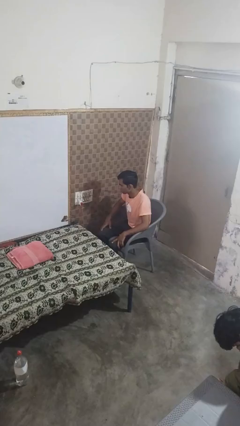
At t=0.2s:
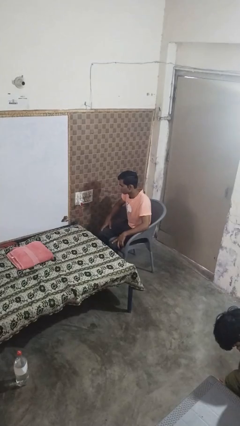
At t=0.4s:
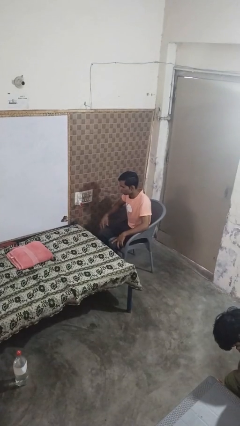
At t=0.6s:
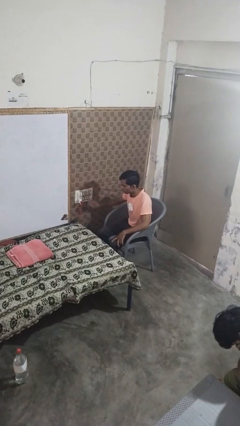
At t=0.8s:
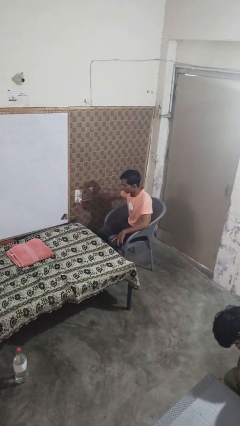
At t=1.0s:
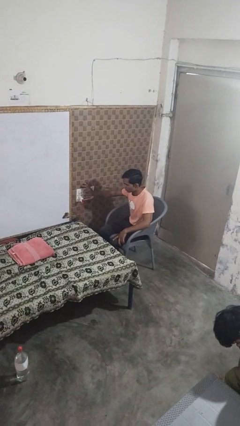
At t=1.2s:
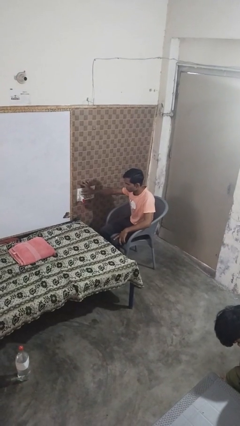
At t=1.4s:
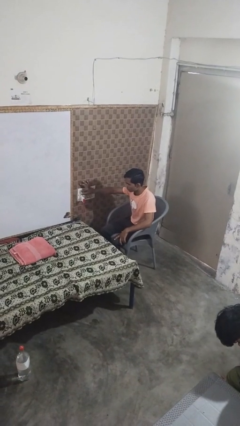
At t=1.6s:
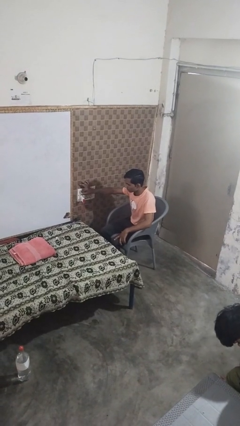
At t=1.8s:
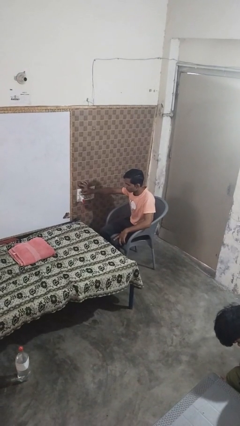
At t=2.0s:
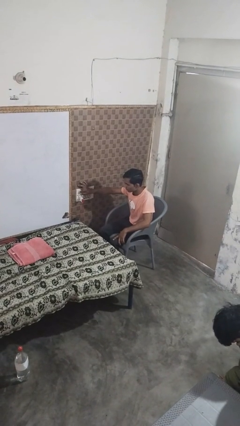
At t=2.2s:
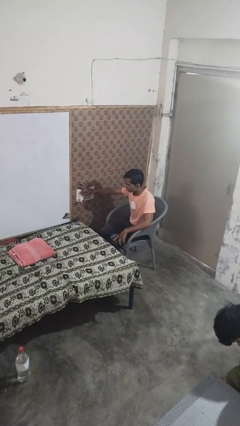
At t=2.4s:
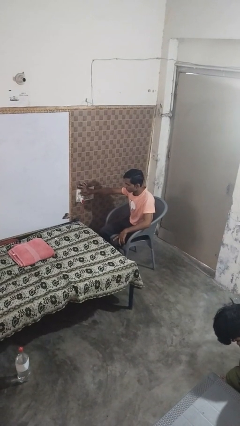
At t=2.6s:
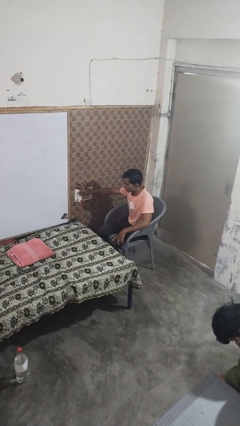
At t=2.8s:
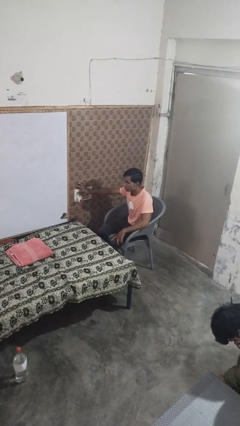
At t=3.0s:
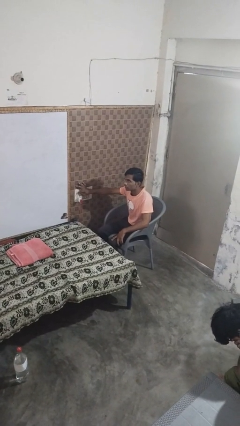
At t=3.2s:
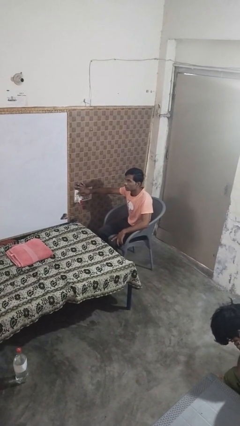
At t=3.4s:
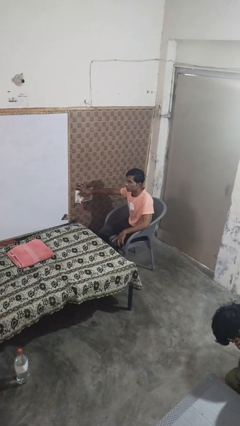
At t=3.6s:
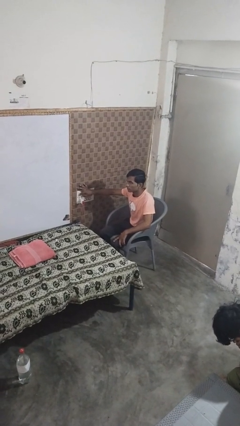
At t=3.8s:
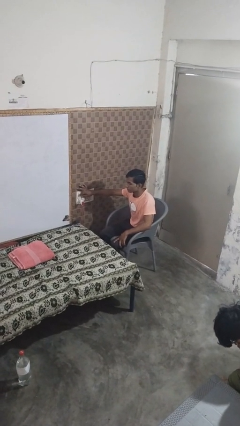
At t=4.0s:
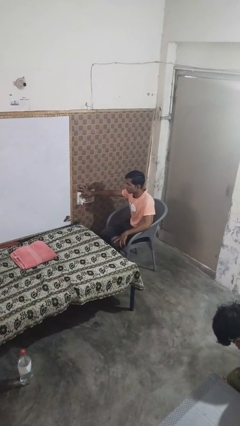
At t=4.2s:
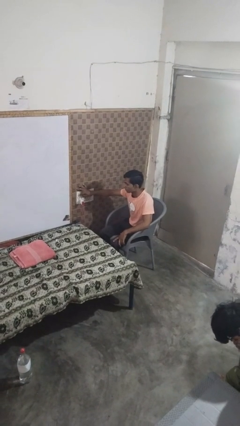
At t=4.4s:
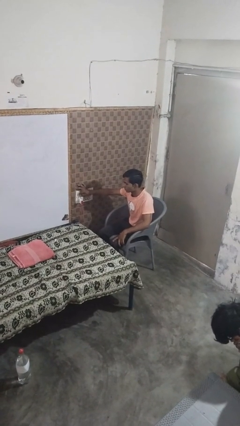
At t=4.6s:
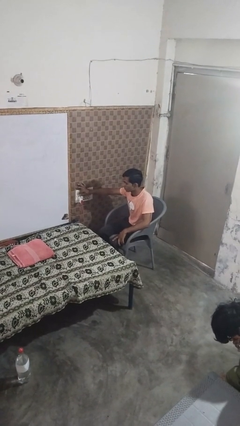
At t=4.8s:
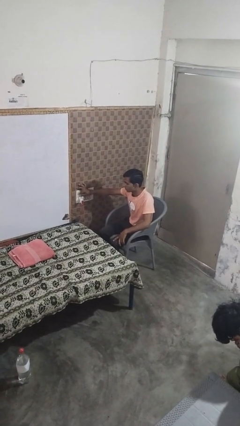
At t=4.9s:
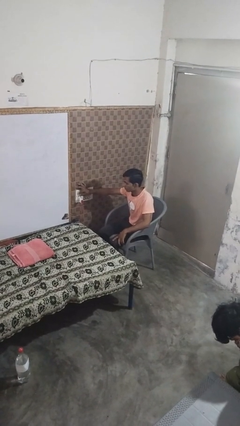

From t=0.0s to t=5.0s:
person adjusts thermostat

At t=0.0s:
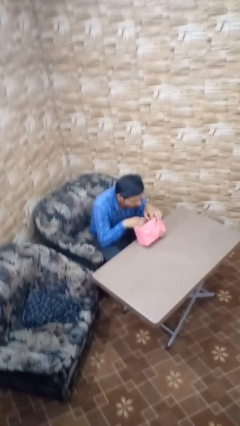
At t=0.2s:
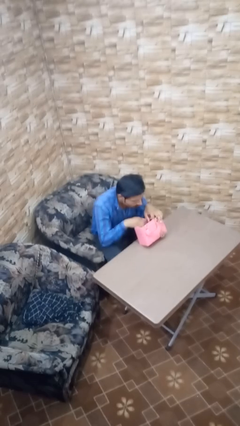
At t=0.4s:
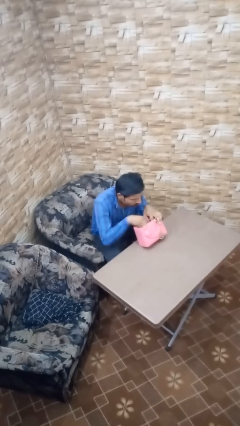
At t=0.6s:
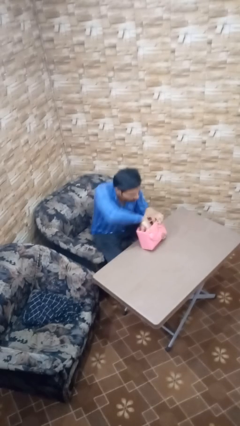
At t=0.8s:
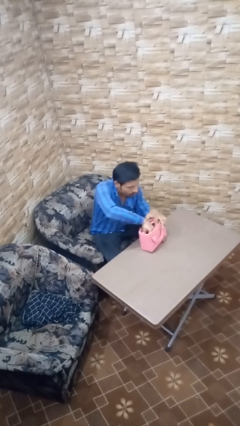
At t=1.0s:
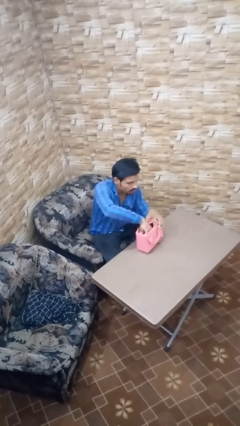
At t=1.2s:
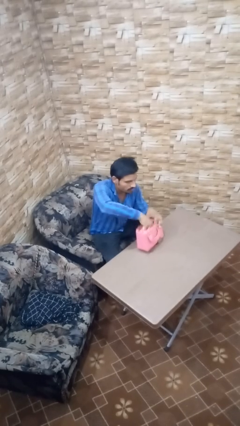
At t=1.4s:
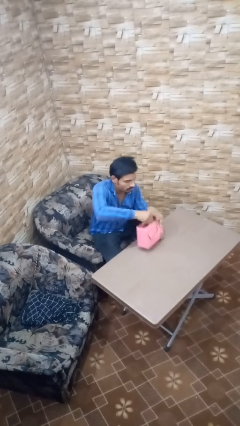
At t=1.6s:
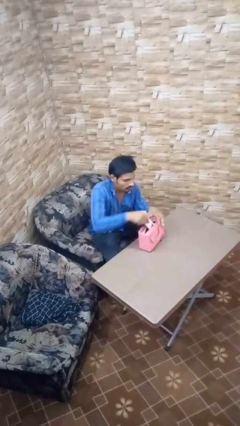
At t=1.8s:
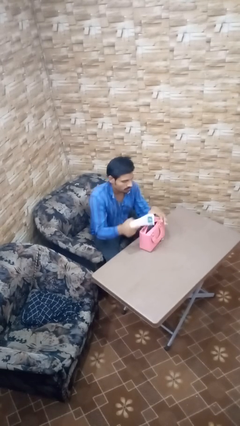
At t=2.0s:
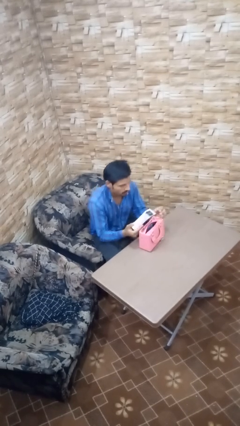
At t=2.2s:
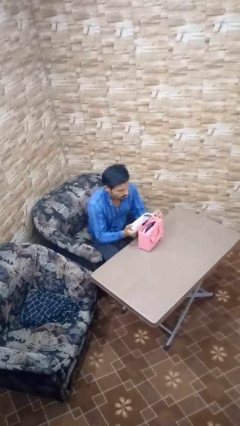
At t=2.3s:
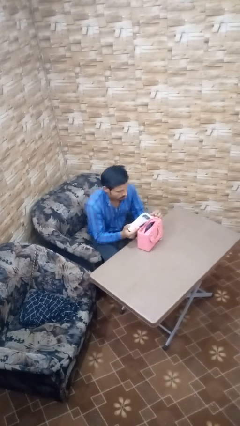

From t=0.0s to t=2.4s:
person takes object from purse

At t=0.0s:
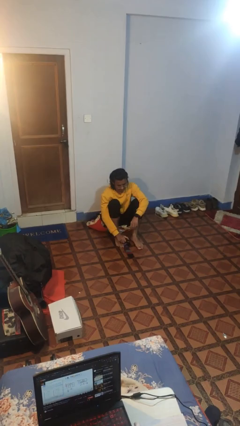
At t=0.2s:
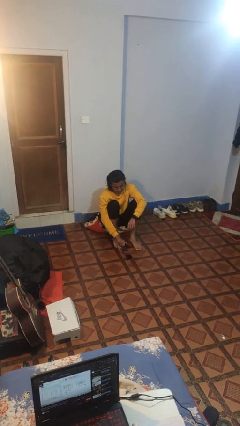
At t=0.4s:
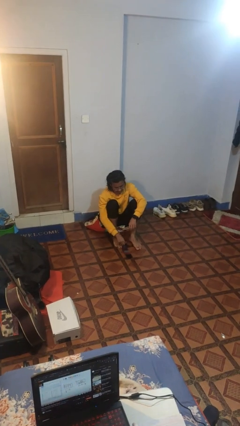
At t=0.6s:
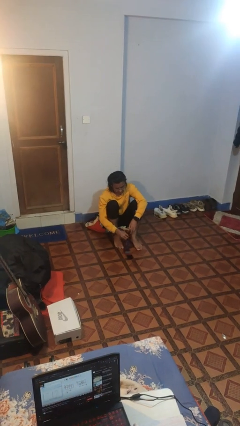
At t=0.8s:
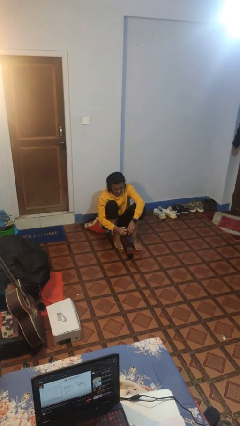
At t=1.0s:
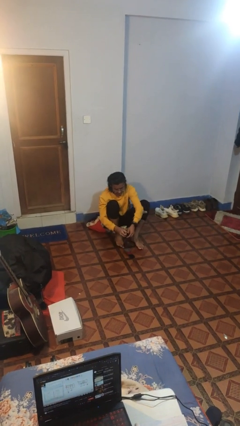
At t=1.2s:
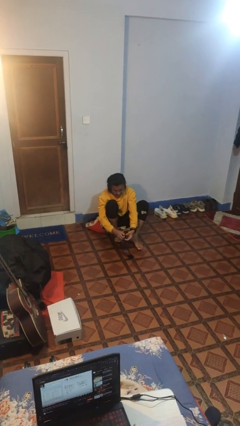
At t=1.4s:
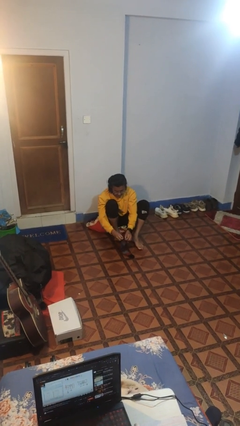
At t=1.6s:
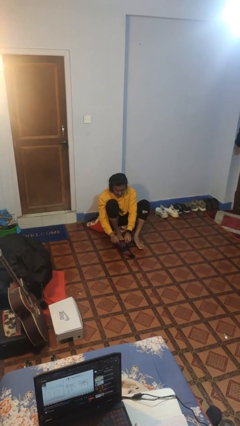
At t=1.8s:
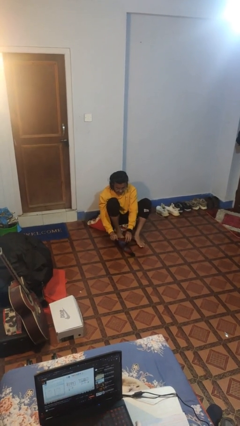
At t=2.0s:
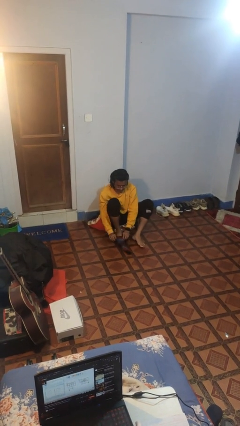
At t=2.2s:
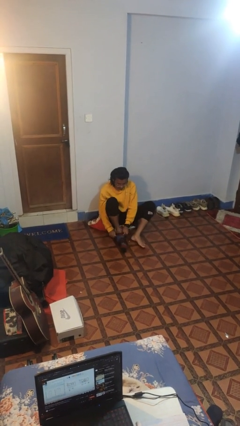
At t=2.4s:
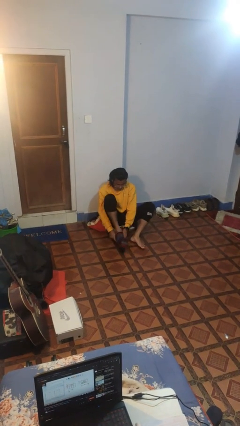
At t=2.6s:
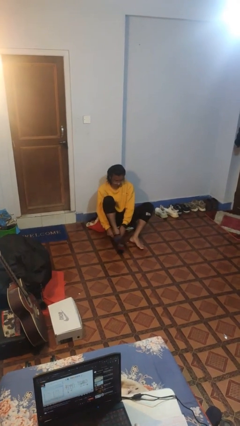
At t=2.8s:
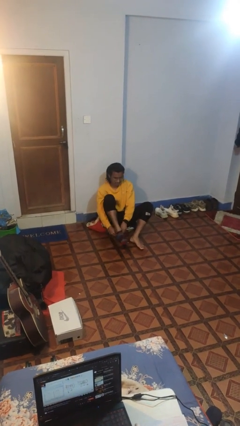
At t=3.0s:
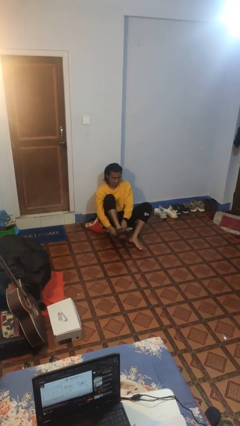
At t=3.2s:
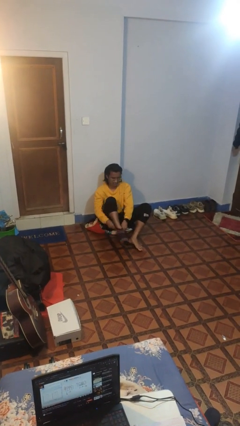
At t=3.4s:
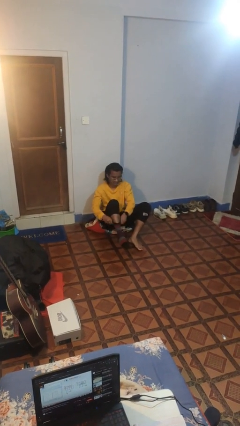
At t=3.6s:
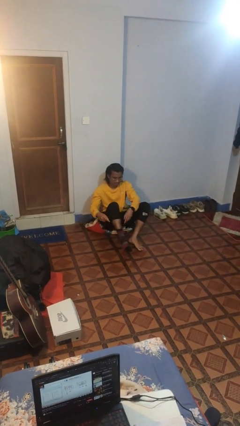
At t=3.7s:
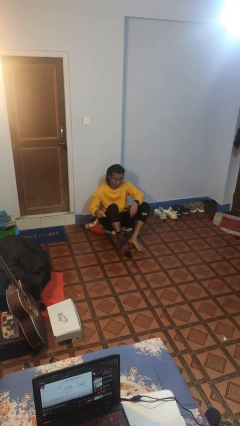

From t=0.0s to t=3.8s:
person puts on socks

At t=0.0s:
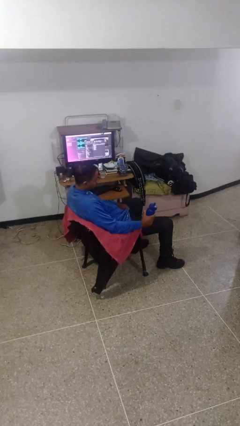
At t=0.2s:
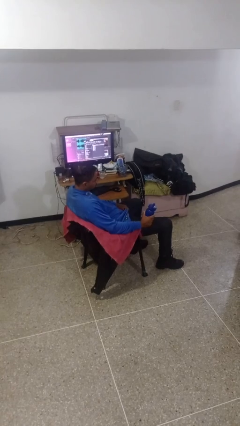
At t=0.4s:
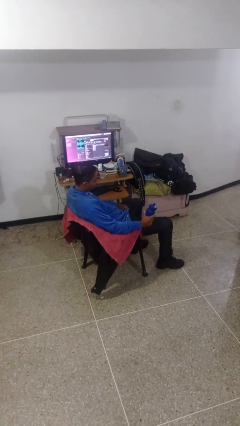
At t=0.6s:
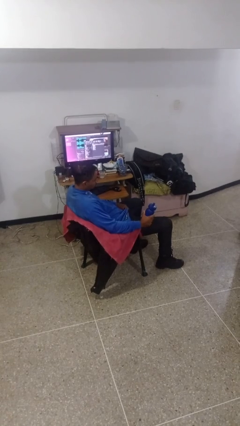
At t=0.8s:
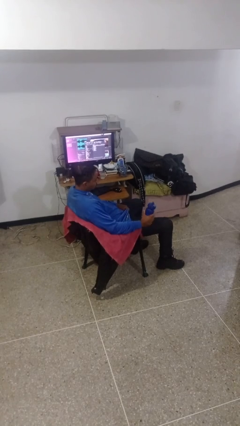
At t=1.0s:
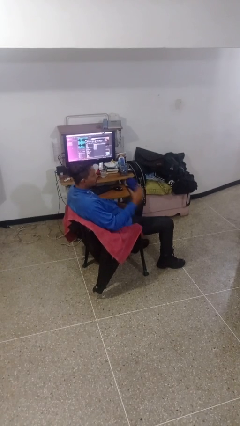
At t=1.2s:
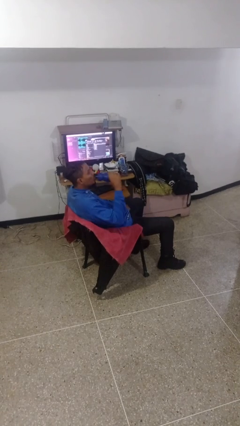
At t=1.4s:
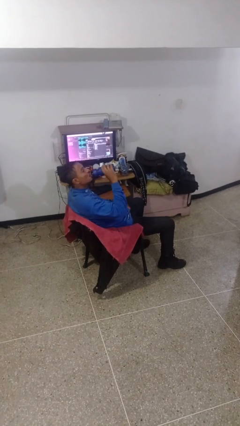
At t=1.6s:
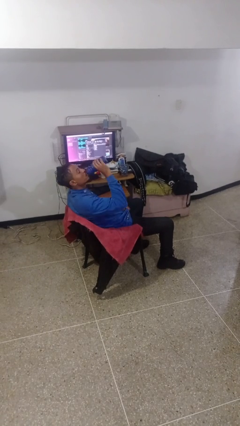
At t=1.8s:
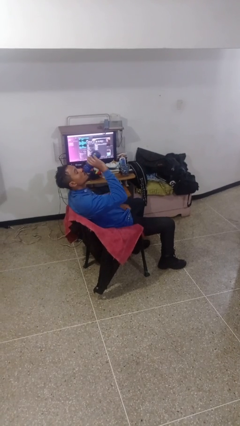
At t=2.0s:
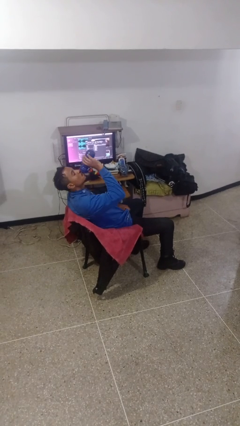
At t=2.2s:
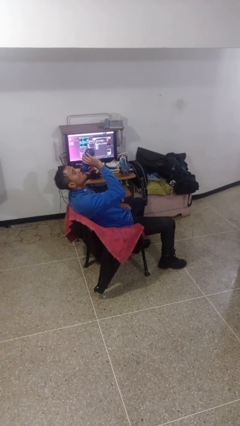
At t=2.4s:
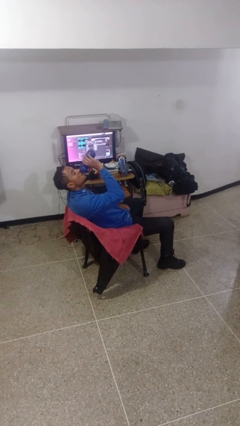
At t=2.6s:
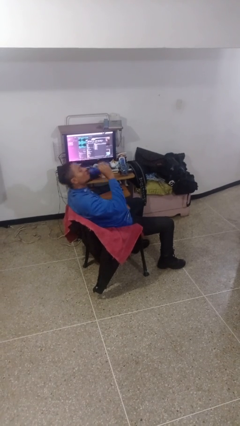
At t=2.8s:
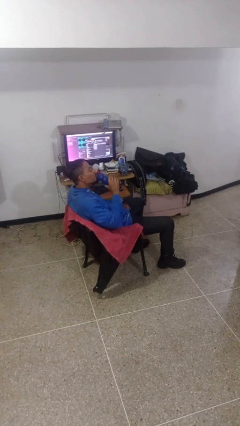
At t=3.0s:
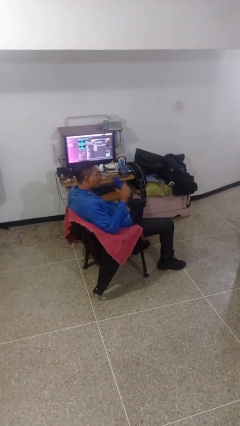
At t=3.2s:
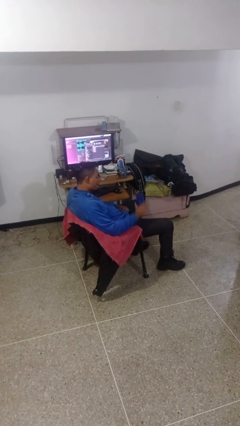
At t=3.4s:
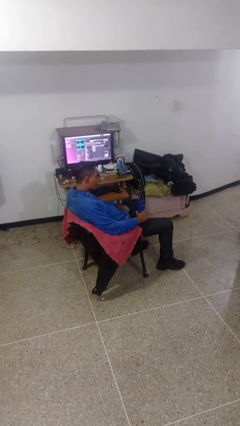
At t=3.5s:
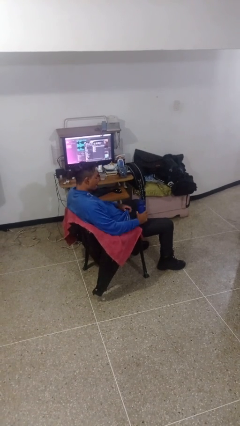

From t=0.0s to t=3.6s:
person drinks from bottle

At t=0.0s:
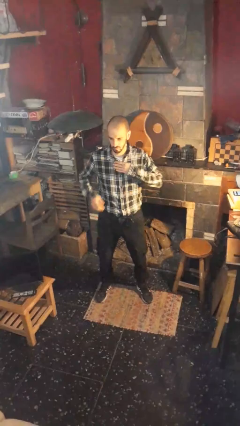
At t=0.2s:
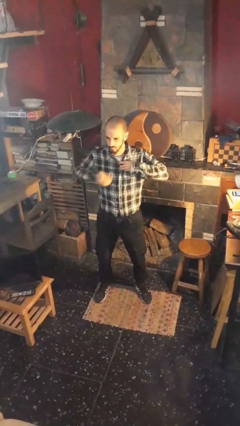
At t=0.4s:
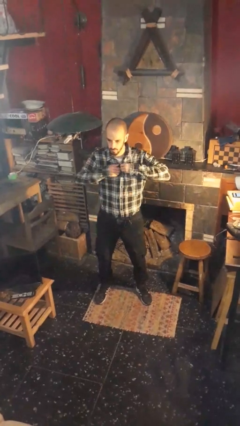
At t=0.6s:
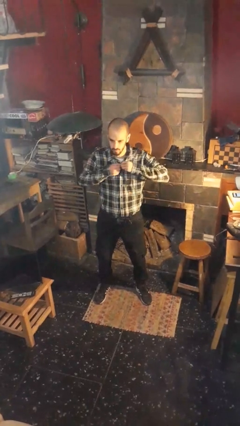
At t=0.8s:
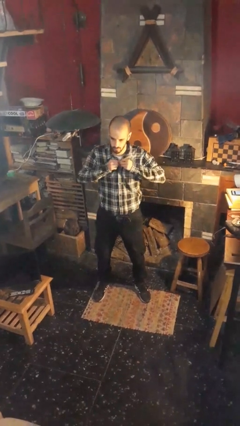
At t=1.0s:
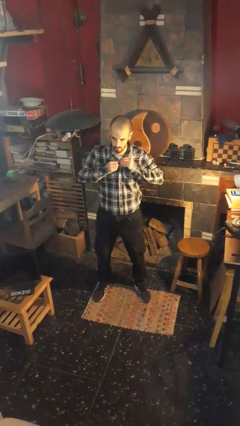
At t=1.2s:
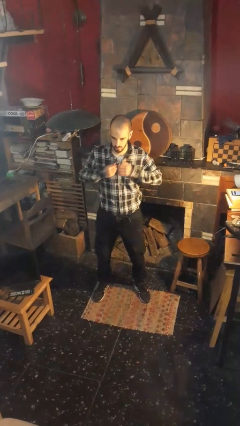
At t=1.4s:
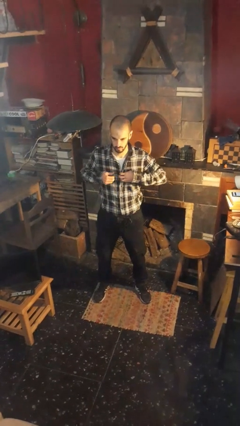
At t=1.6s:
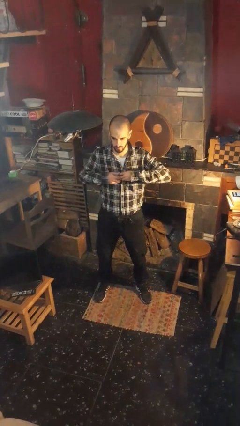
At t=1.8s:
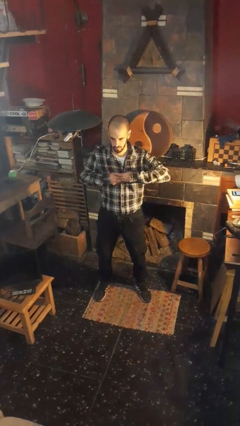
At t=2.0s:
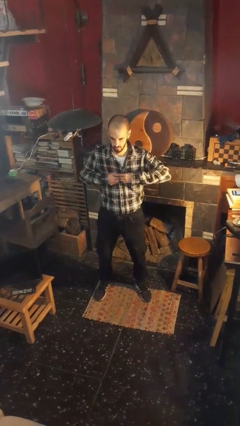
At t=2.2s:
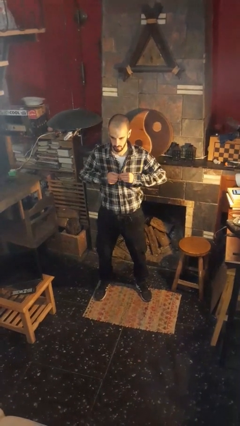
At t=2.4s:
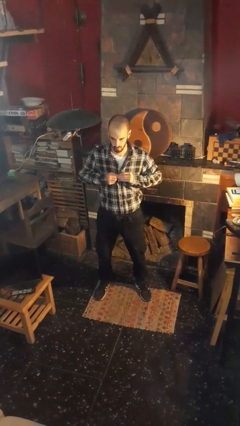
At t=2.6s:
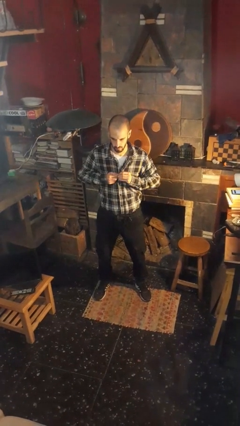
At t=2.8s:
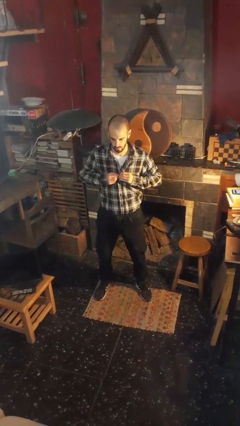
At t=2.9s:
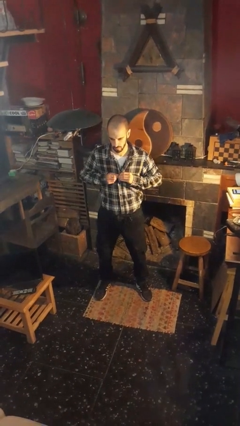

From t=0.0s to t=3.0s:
person unbuttons shirt
